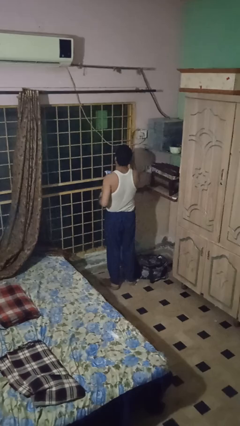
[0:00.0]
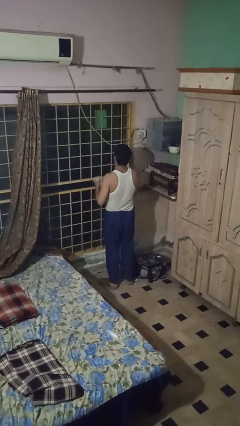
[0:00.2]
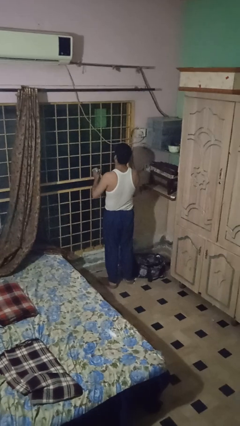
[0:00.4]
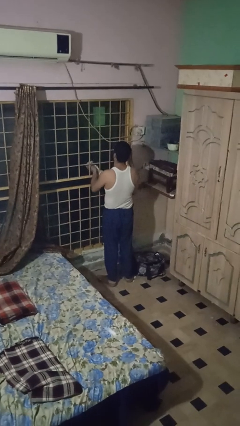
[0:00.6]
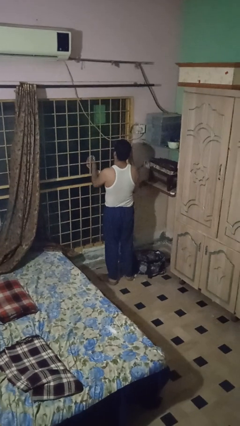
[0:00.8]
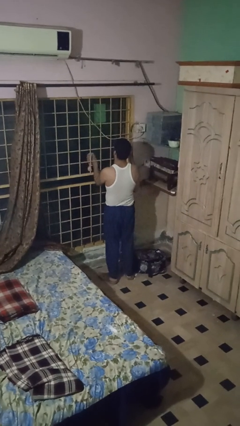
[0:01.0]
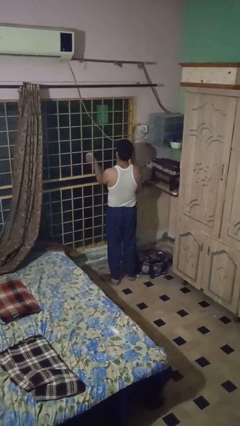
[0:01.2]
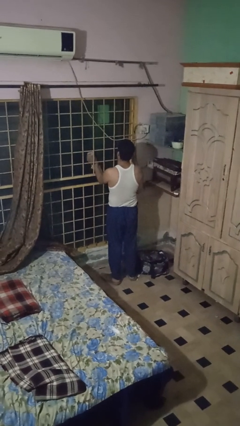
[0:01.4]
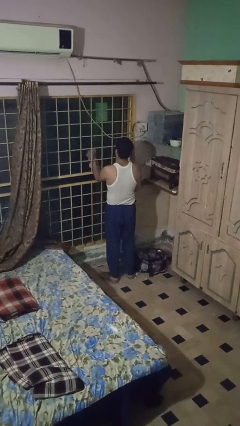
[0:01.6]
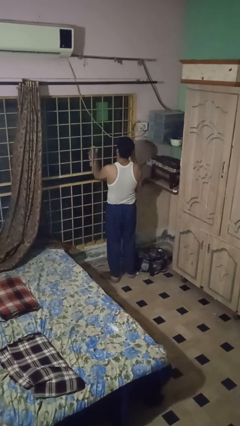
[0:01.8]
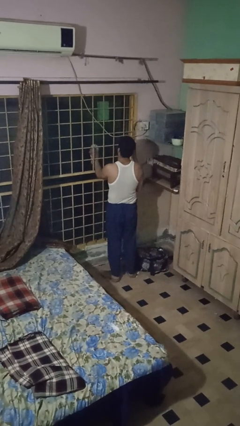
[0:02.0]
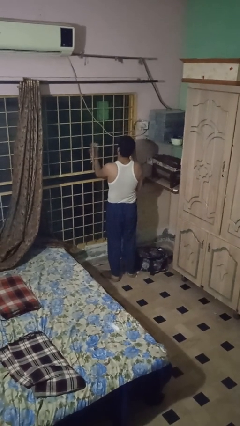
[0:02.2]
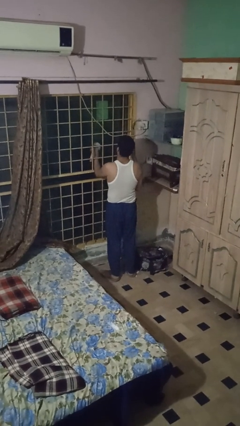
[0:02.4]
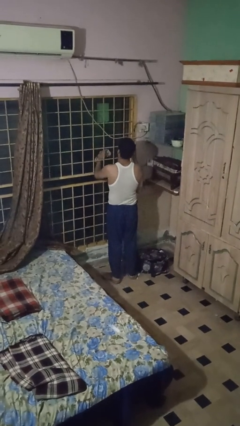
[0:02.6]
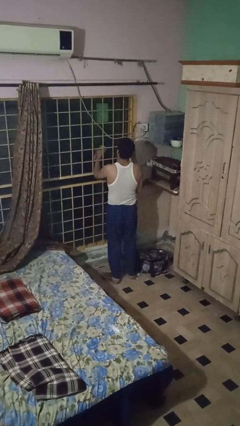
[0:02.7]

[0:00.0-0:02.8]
person washes window

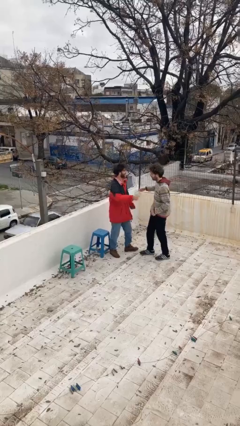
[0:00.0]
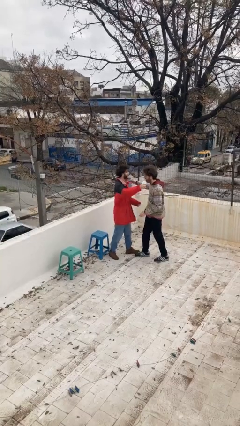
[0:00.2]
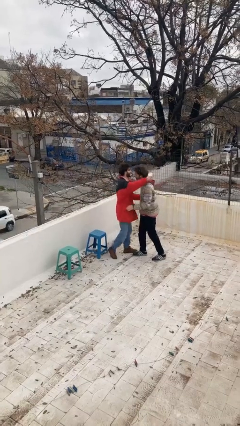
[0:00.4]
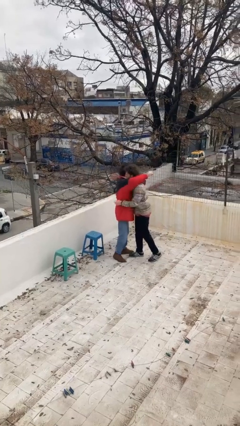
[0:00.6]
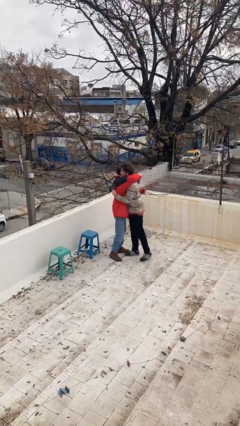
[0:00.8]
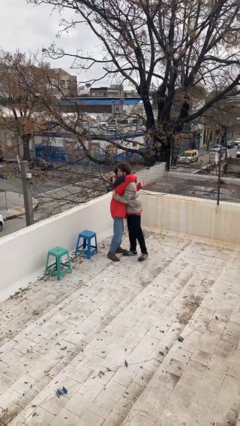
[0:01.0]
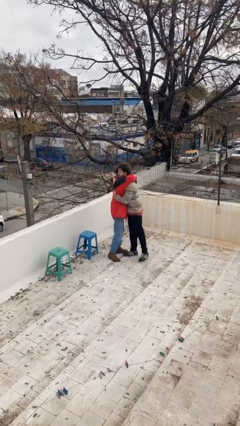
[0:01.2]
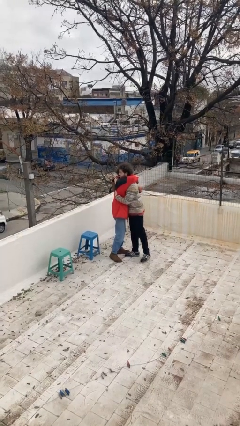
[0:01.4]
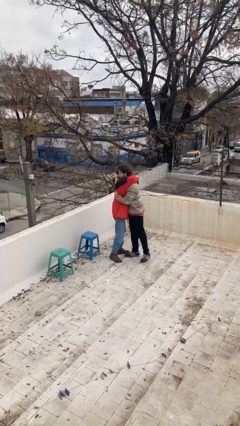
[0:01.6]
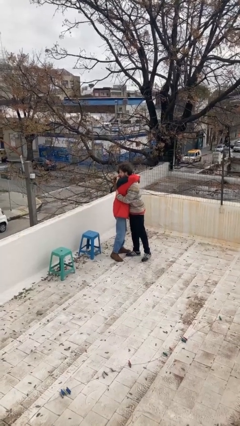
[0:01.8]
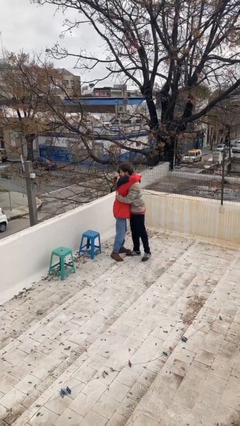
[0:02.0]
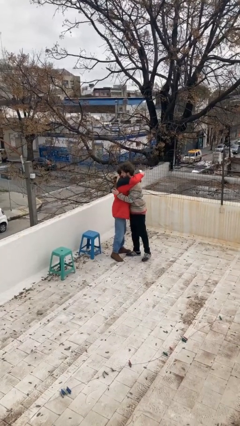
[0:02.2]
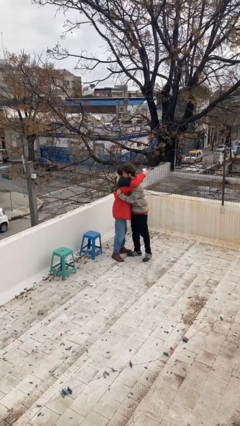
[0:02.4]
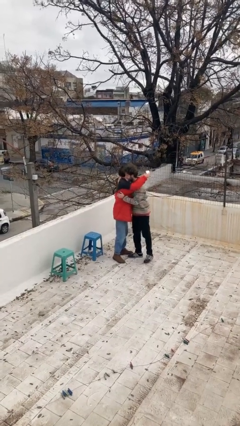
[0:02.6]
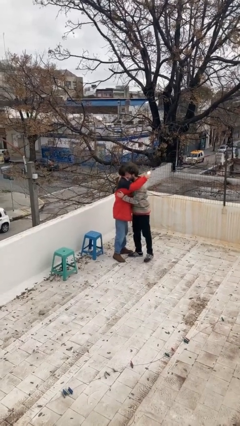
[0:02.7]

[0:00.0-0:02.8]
person embraces person

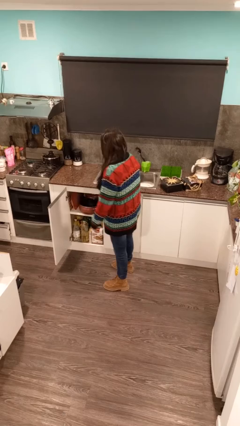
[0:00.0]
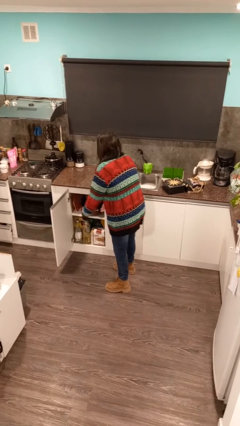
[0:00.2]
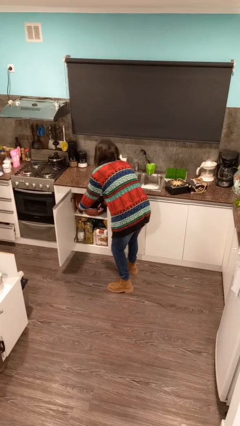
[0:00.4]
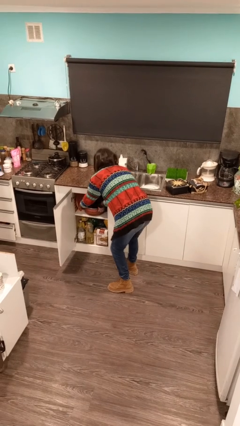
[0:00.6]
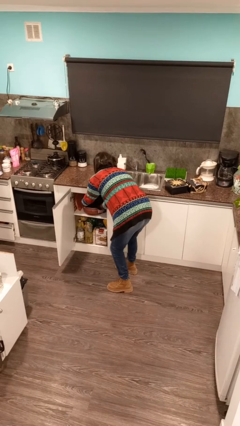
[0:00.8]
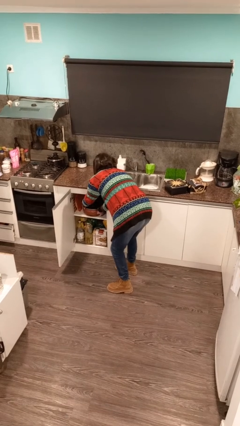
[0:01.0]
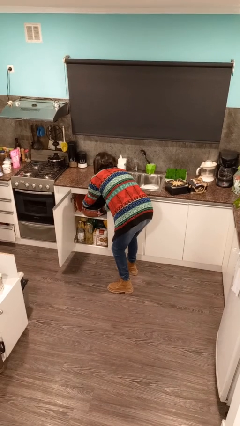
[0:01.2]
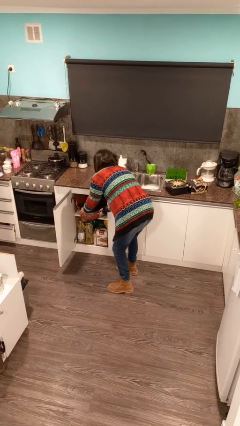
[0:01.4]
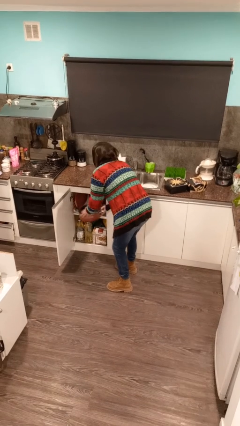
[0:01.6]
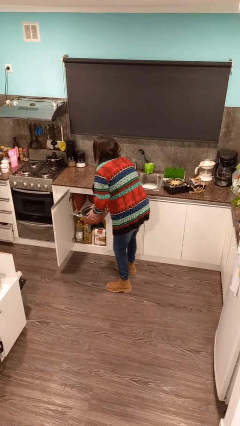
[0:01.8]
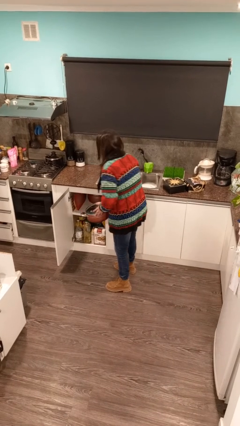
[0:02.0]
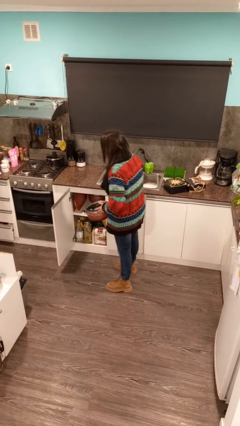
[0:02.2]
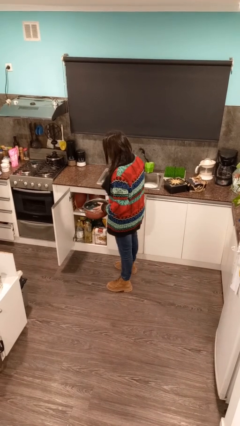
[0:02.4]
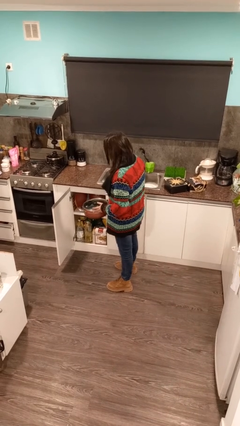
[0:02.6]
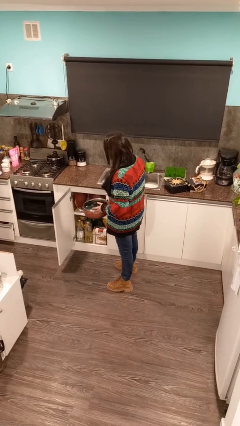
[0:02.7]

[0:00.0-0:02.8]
person picks up object from cabinet

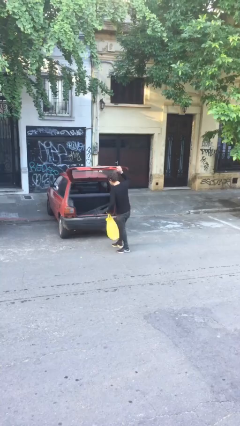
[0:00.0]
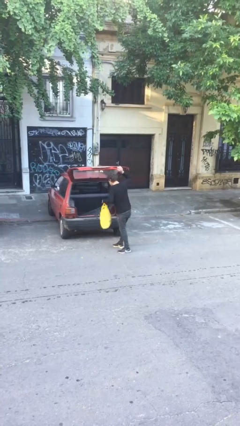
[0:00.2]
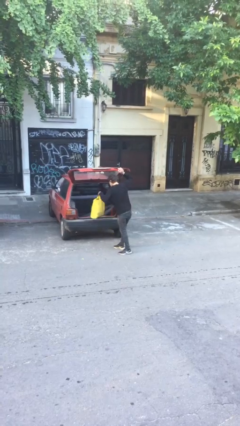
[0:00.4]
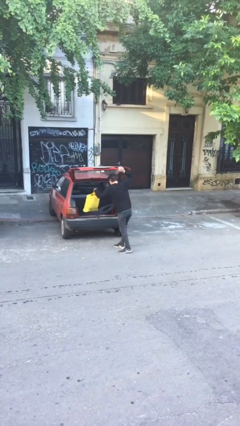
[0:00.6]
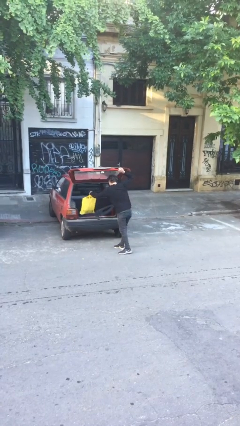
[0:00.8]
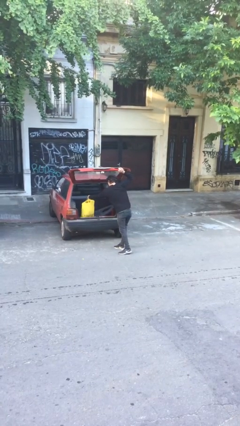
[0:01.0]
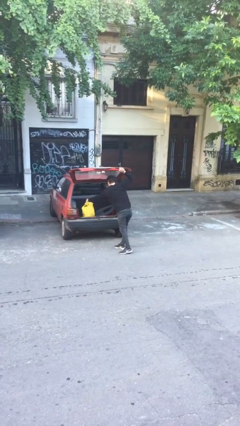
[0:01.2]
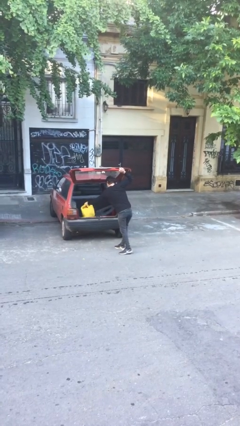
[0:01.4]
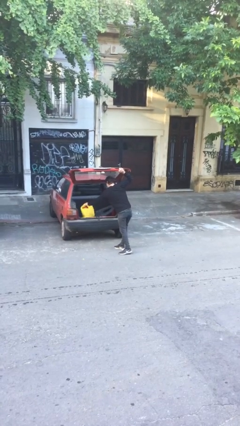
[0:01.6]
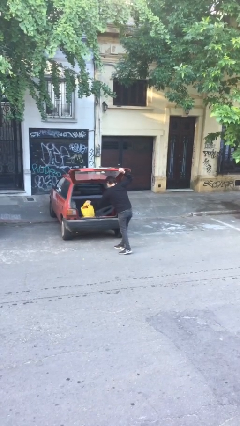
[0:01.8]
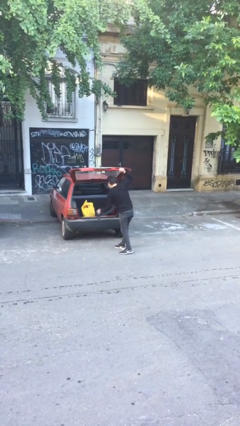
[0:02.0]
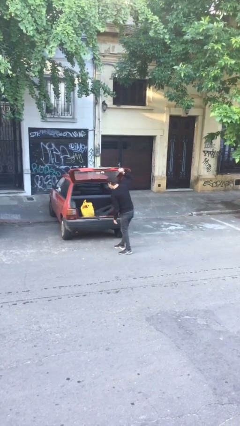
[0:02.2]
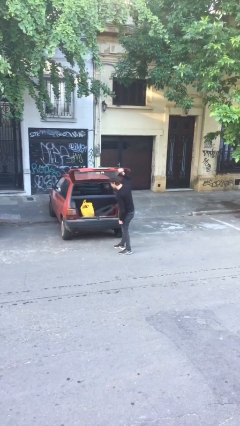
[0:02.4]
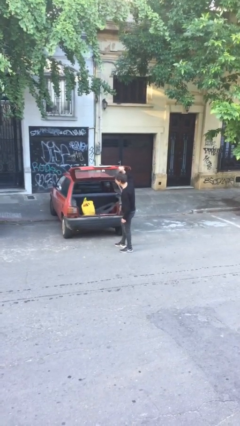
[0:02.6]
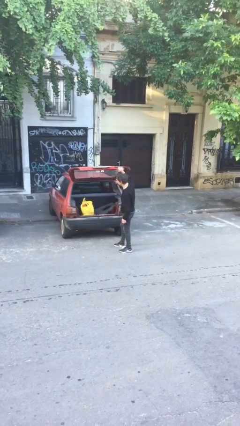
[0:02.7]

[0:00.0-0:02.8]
person loads car

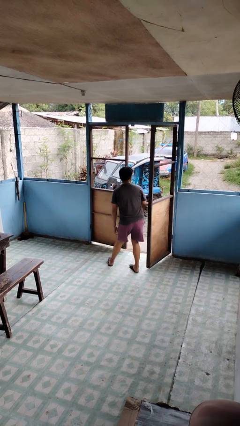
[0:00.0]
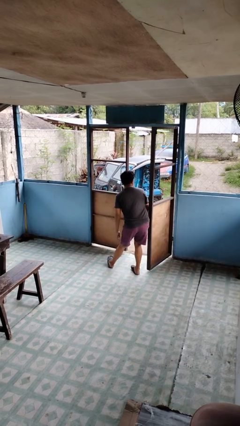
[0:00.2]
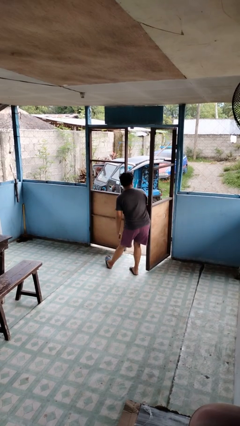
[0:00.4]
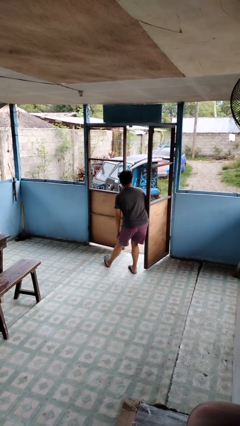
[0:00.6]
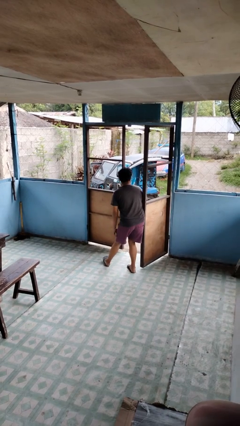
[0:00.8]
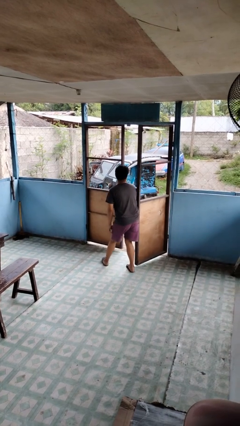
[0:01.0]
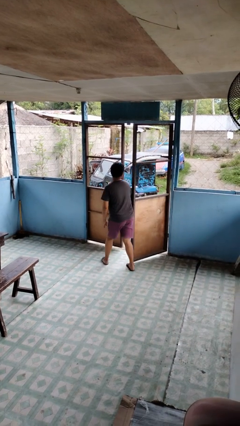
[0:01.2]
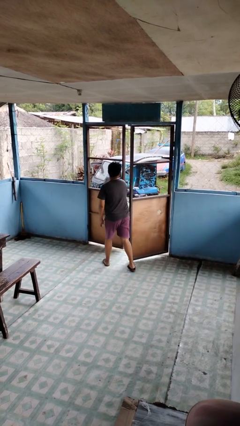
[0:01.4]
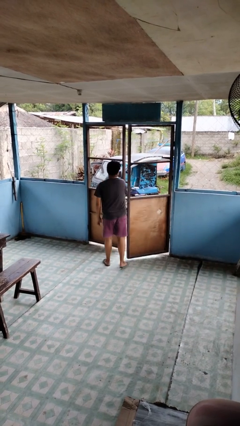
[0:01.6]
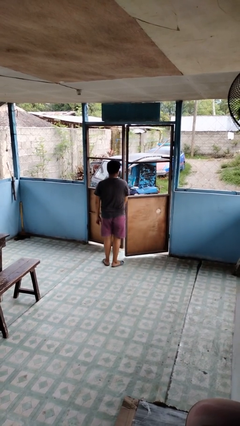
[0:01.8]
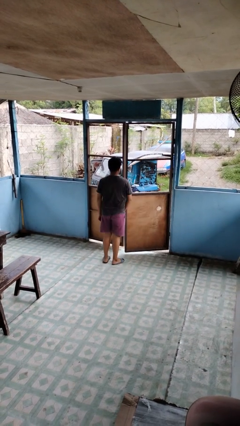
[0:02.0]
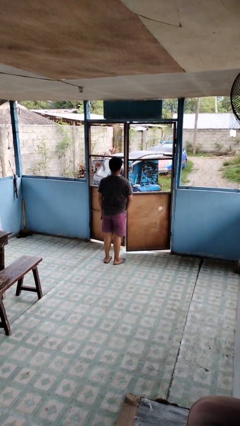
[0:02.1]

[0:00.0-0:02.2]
person closes door with hip

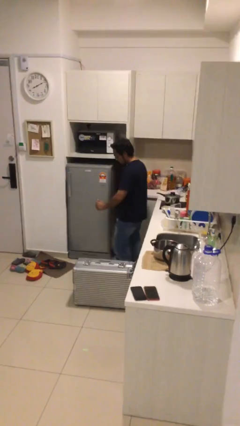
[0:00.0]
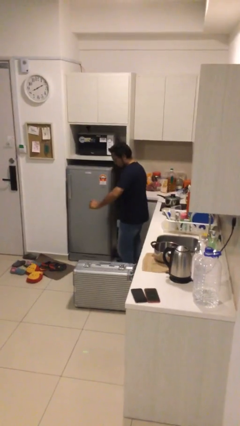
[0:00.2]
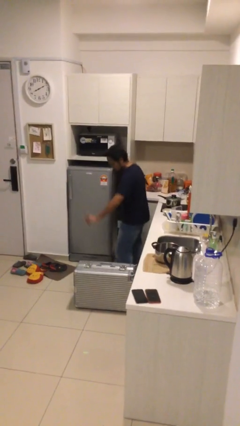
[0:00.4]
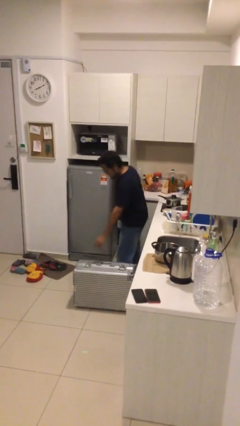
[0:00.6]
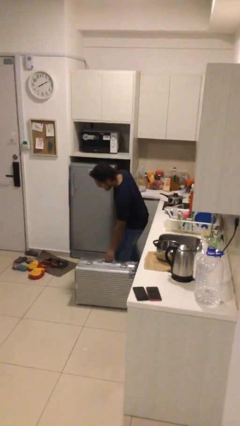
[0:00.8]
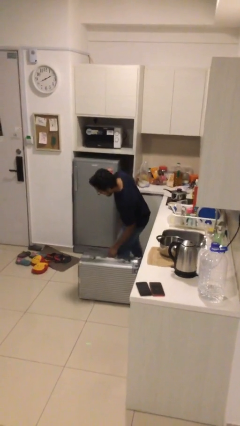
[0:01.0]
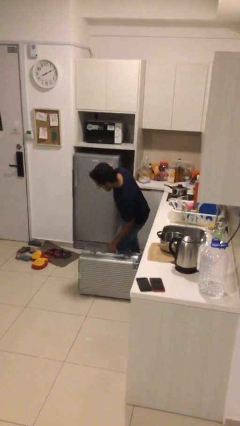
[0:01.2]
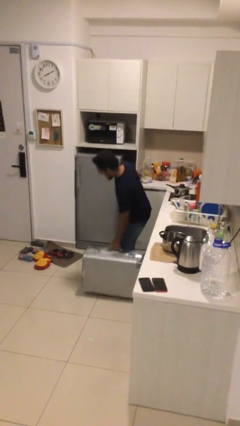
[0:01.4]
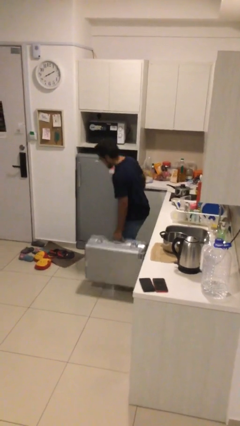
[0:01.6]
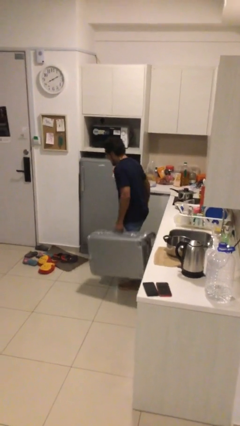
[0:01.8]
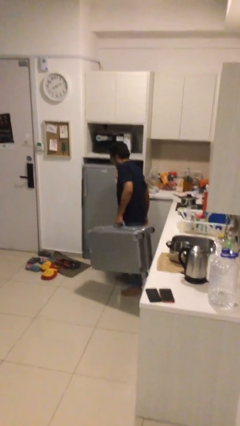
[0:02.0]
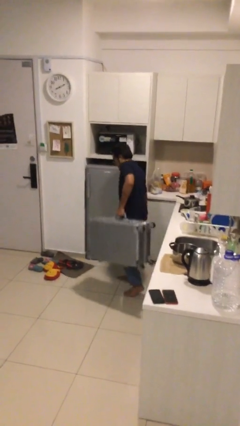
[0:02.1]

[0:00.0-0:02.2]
person picks up object from floor

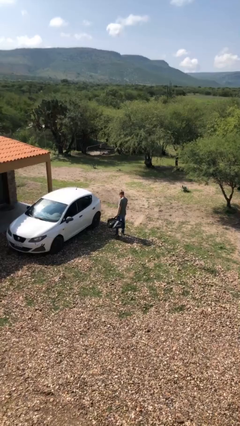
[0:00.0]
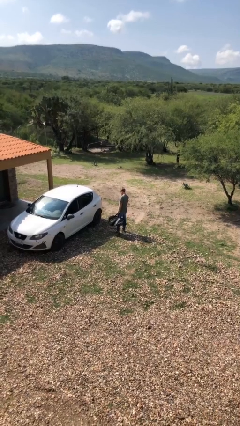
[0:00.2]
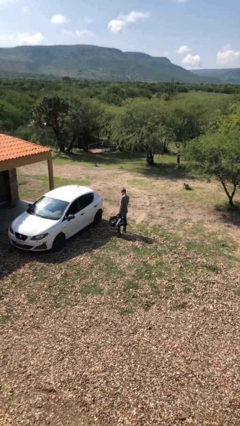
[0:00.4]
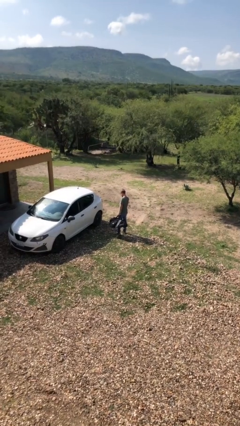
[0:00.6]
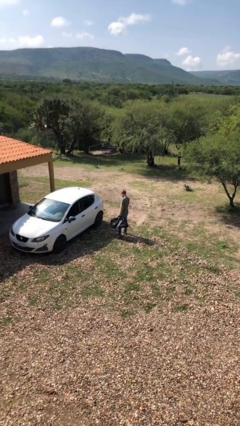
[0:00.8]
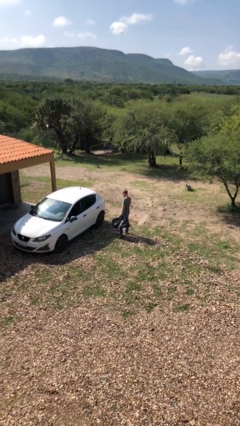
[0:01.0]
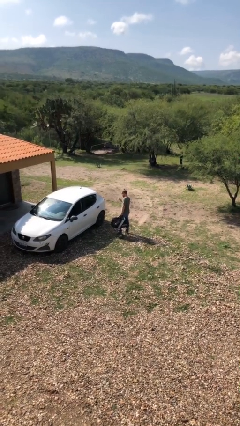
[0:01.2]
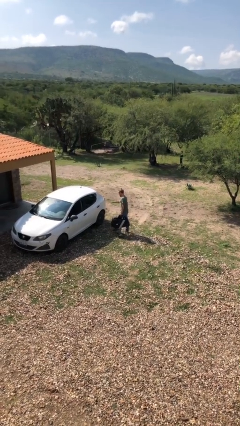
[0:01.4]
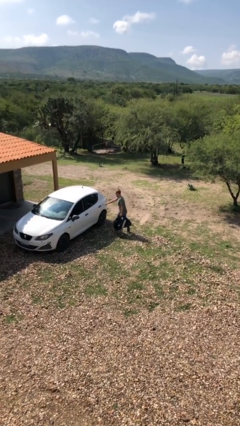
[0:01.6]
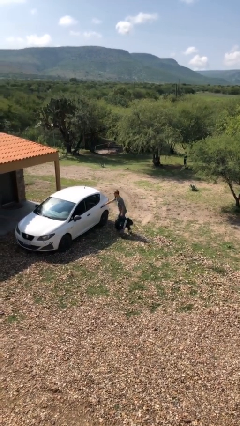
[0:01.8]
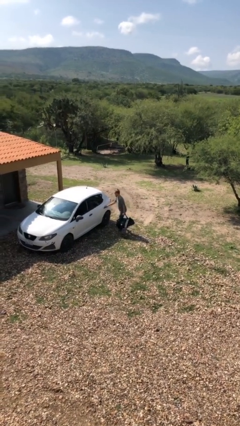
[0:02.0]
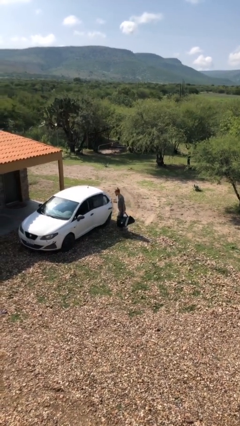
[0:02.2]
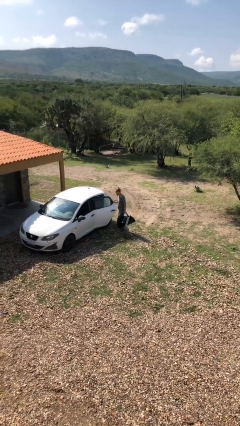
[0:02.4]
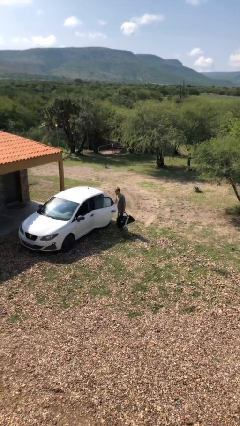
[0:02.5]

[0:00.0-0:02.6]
person opens car door
